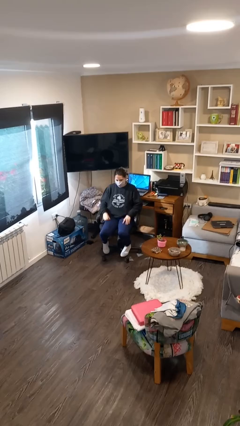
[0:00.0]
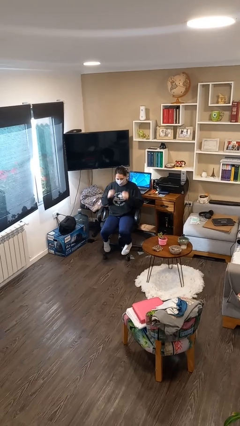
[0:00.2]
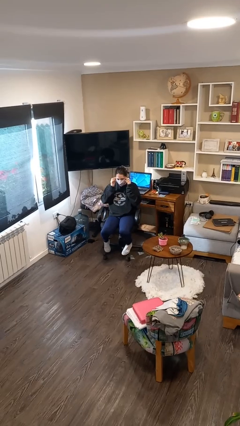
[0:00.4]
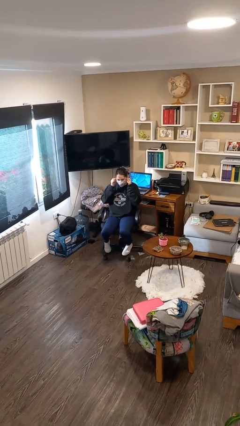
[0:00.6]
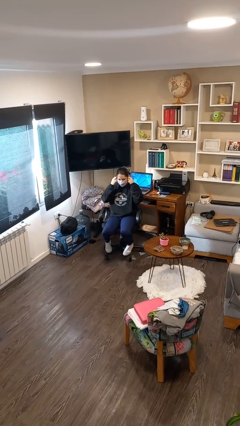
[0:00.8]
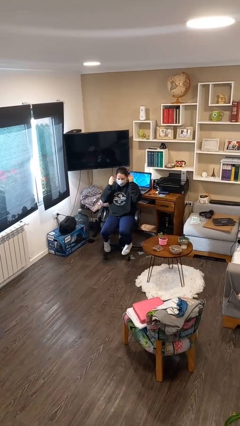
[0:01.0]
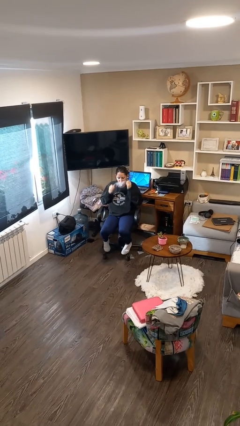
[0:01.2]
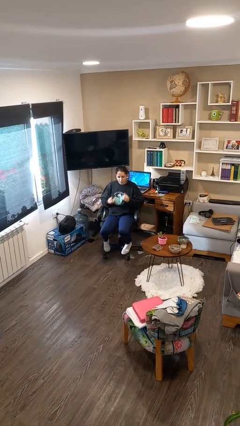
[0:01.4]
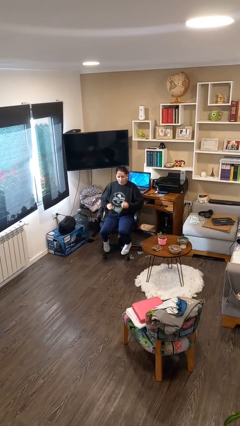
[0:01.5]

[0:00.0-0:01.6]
person takes off facemask

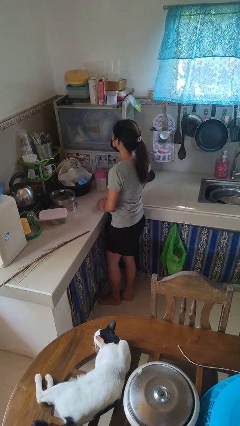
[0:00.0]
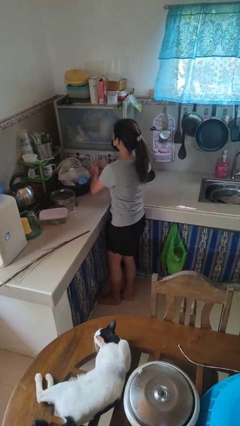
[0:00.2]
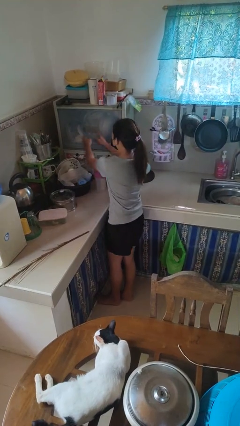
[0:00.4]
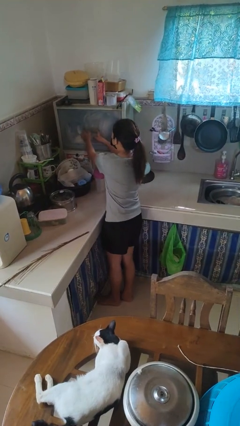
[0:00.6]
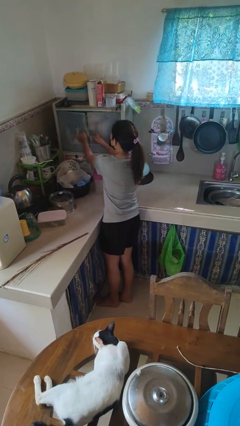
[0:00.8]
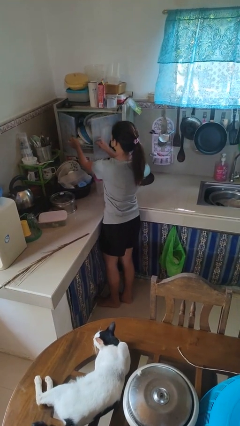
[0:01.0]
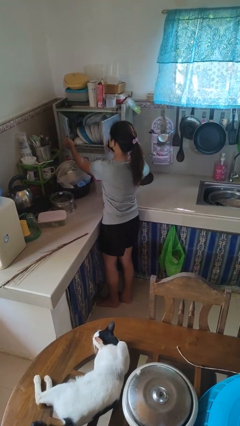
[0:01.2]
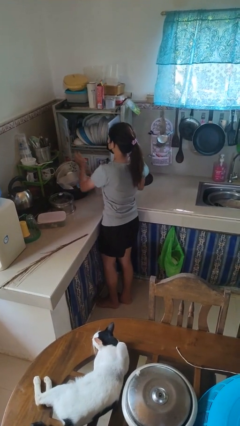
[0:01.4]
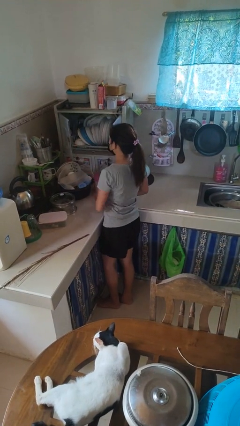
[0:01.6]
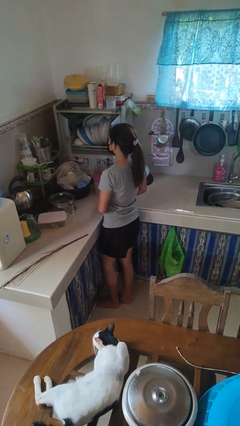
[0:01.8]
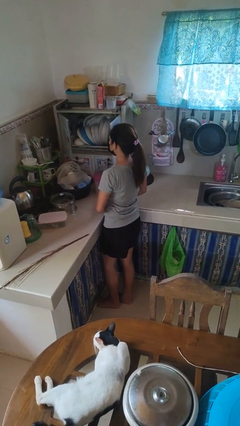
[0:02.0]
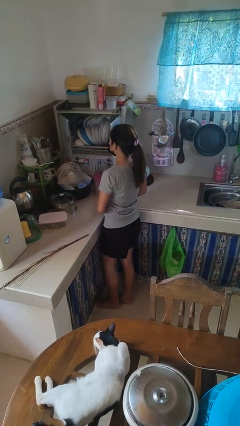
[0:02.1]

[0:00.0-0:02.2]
person opens kitchen drawer

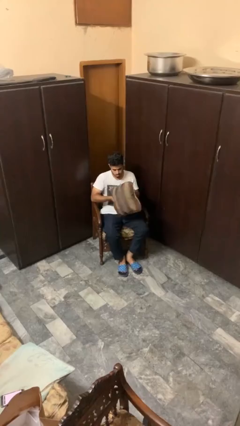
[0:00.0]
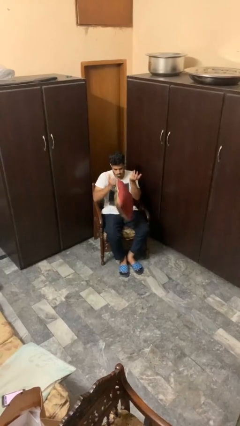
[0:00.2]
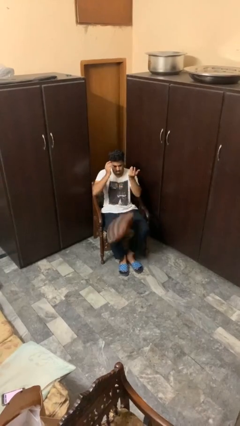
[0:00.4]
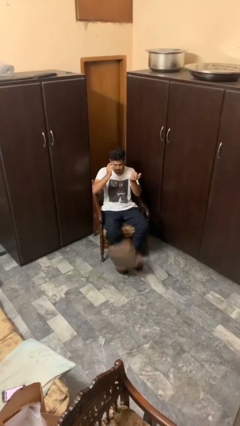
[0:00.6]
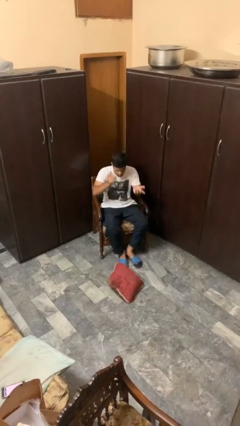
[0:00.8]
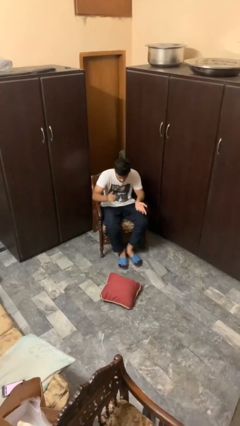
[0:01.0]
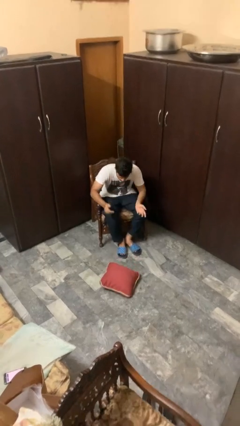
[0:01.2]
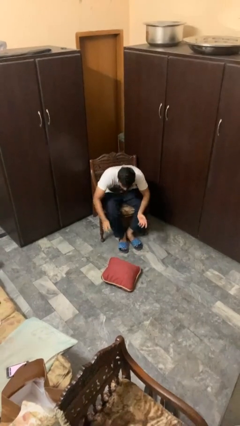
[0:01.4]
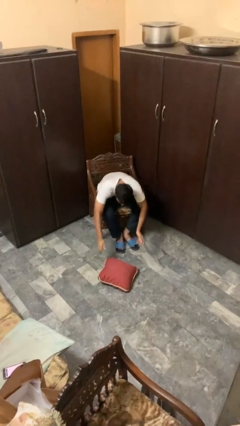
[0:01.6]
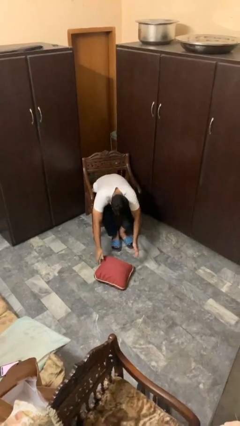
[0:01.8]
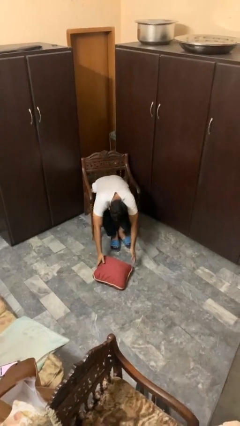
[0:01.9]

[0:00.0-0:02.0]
person drops object

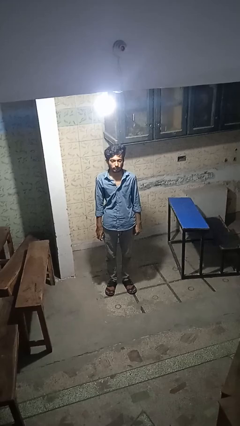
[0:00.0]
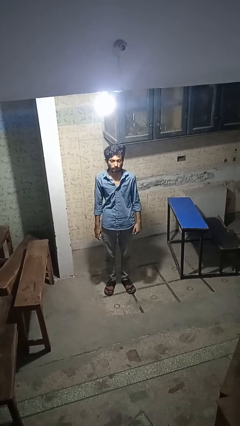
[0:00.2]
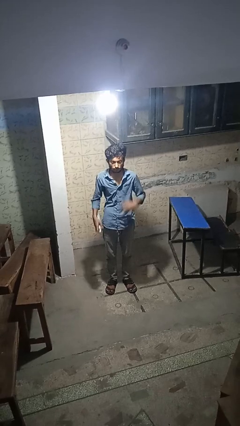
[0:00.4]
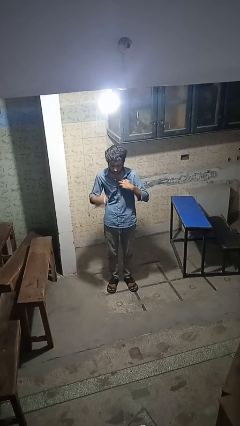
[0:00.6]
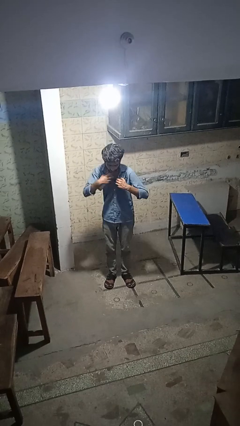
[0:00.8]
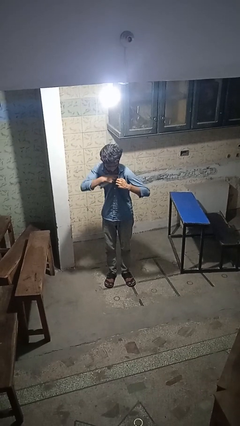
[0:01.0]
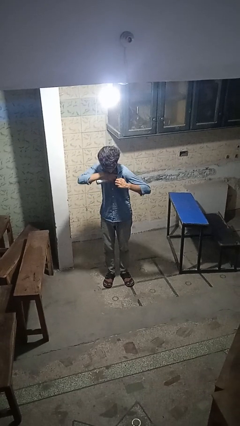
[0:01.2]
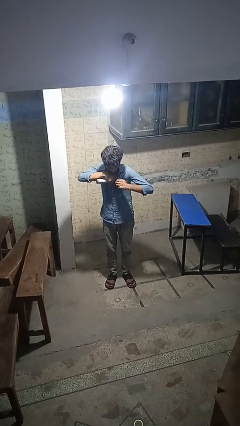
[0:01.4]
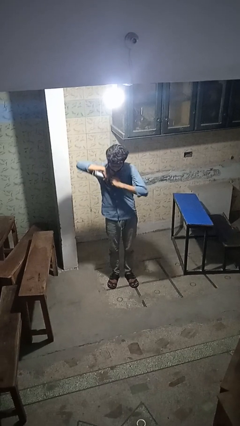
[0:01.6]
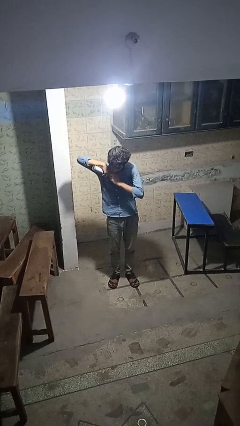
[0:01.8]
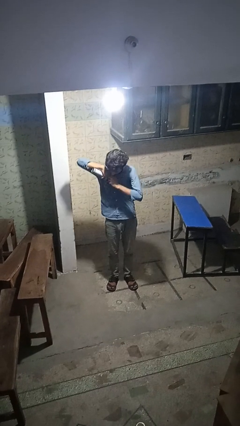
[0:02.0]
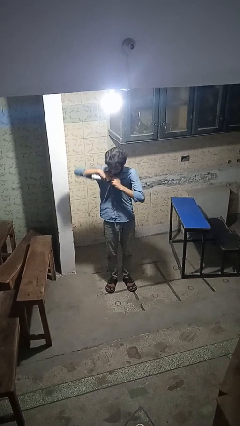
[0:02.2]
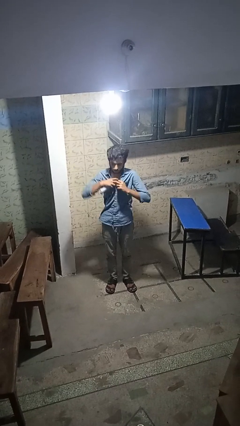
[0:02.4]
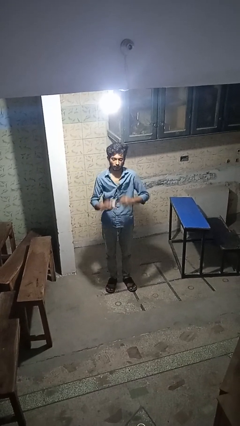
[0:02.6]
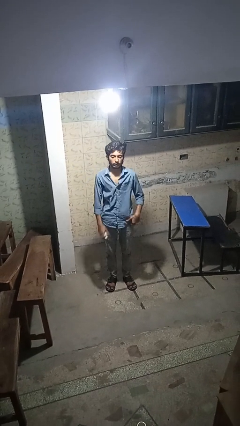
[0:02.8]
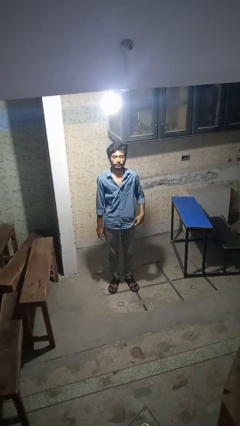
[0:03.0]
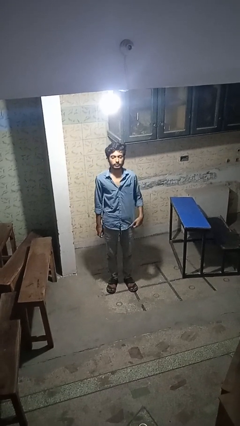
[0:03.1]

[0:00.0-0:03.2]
person applies deodorant

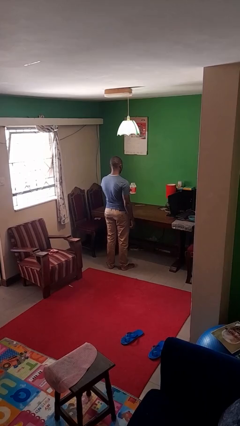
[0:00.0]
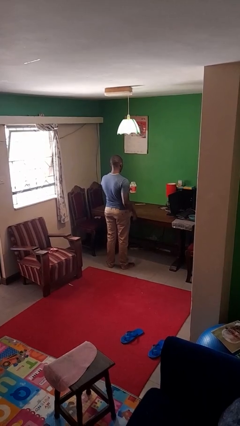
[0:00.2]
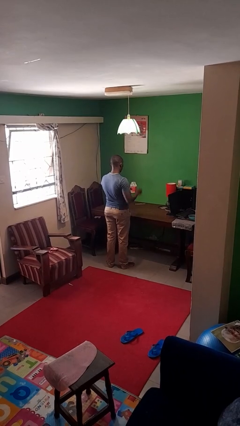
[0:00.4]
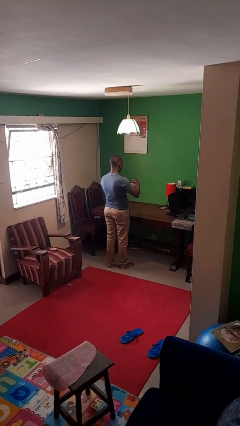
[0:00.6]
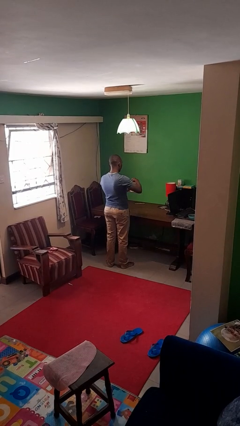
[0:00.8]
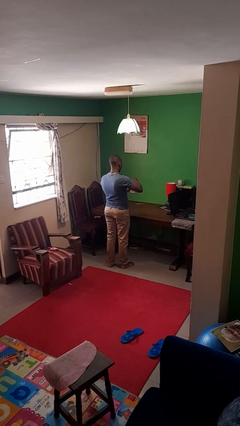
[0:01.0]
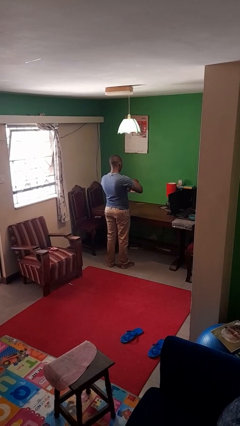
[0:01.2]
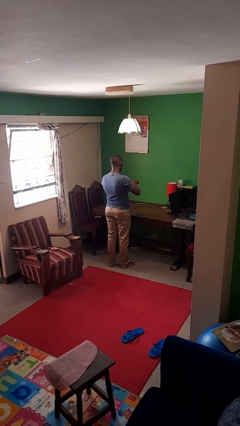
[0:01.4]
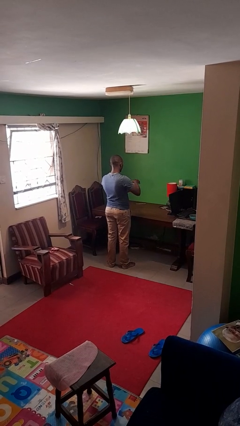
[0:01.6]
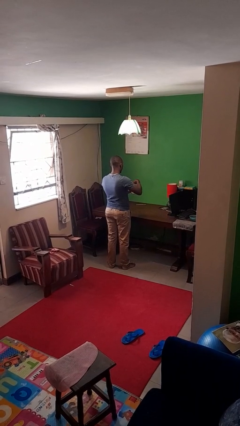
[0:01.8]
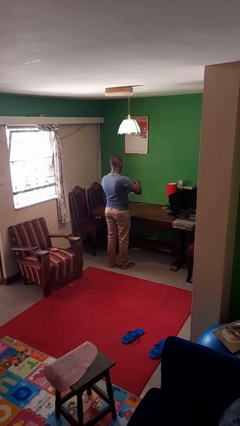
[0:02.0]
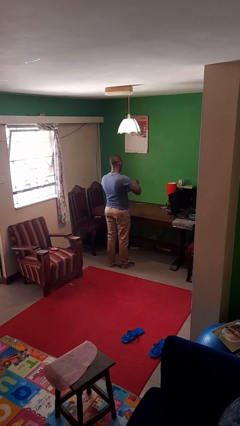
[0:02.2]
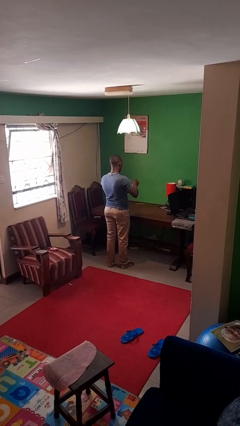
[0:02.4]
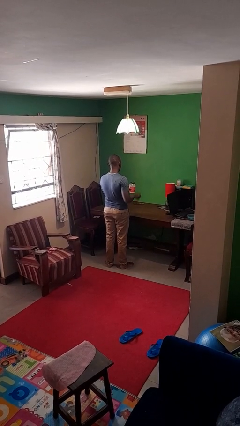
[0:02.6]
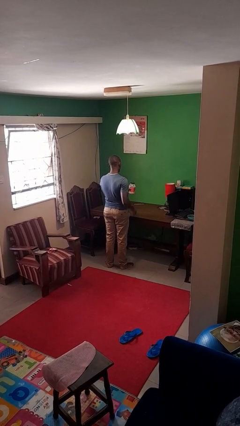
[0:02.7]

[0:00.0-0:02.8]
person closes jar

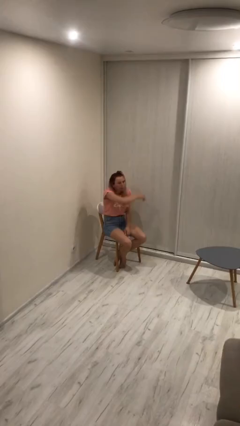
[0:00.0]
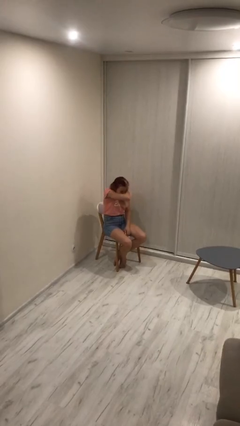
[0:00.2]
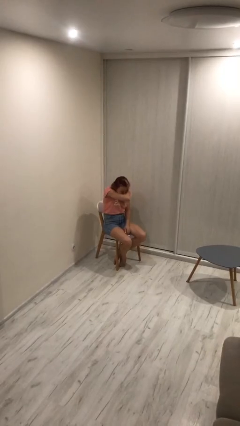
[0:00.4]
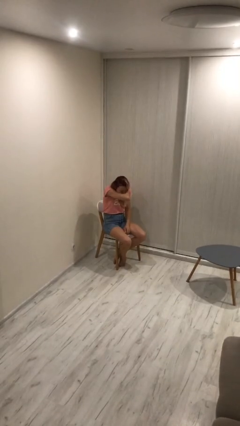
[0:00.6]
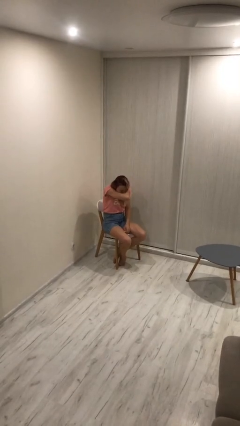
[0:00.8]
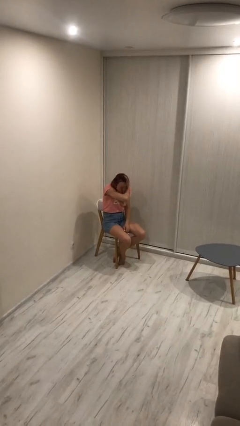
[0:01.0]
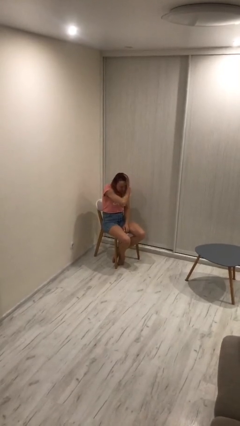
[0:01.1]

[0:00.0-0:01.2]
person sneezes into arm

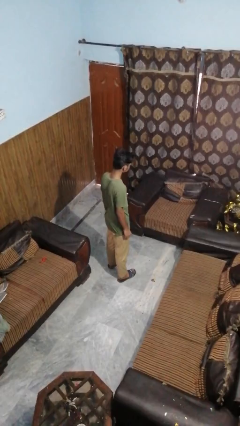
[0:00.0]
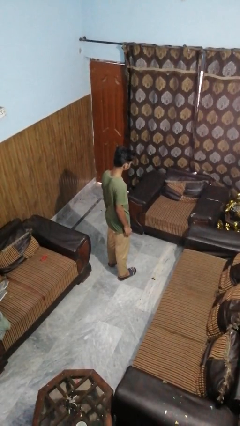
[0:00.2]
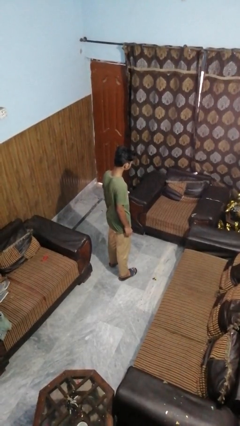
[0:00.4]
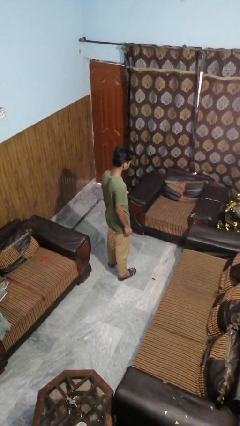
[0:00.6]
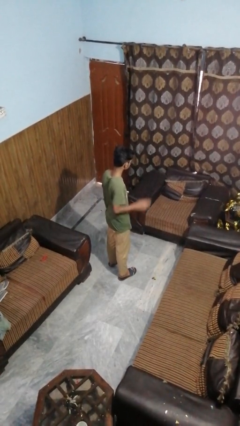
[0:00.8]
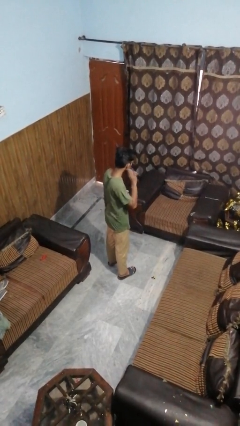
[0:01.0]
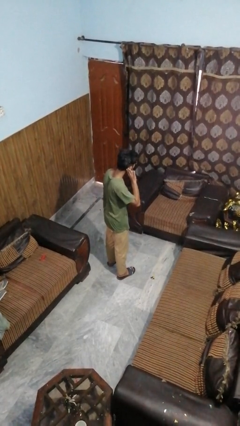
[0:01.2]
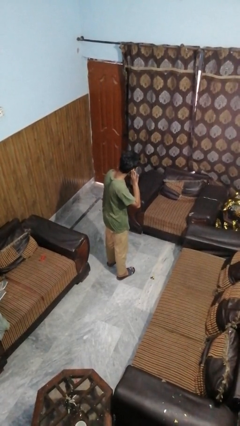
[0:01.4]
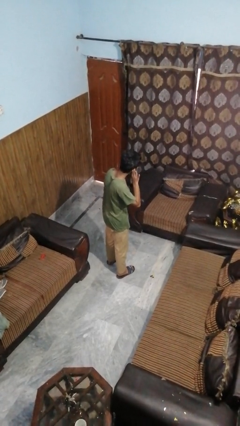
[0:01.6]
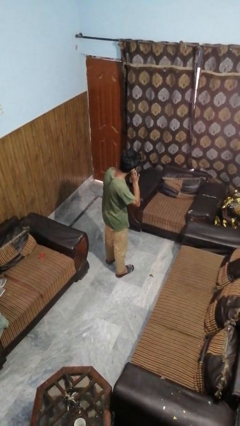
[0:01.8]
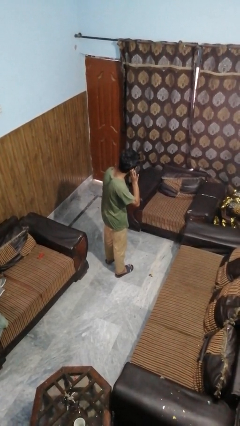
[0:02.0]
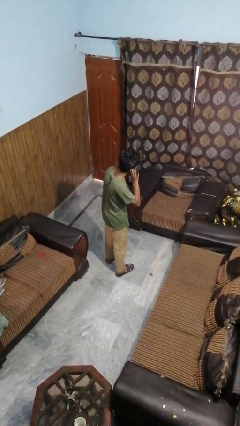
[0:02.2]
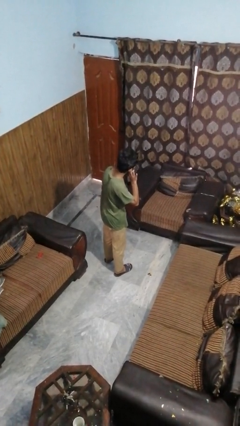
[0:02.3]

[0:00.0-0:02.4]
person gestures listen closely

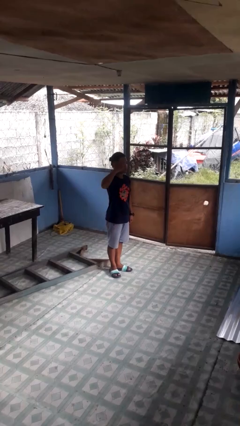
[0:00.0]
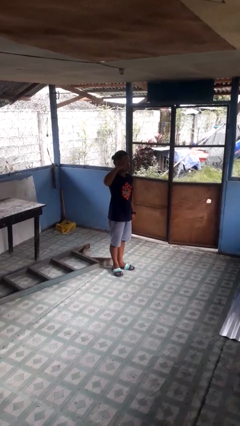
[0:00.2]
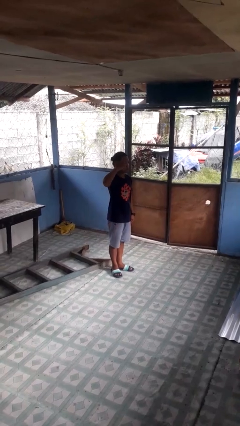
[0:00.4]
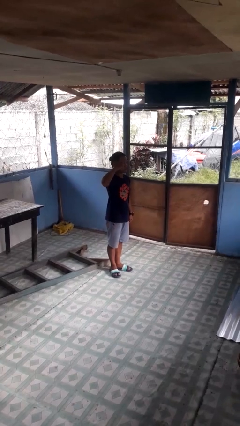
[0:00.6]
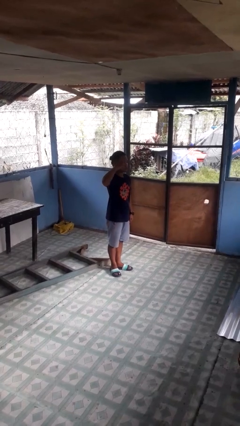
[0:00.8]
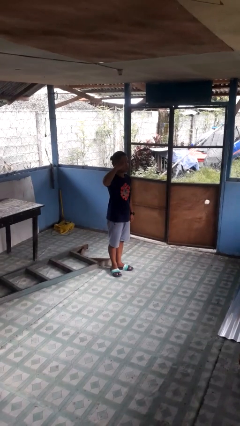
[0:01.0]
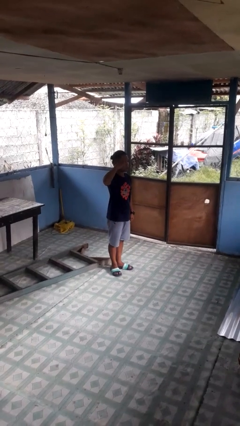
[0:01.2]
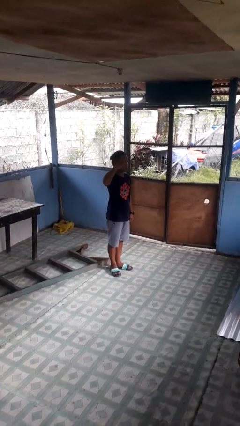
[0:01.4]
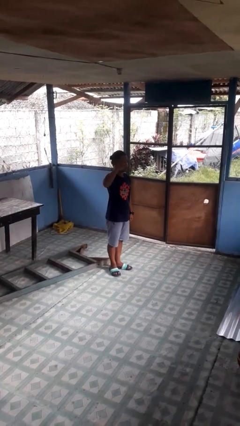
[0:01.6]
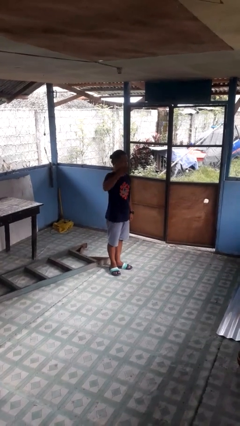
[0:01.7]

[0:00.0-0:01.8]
person salutes
